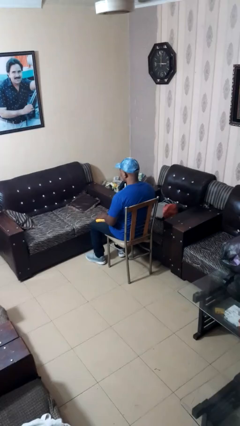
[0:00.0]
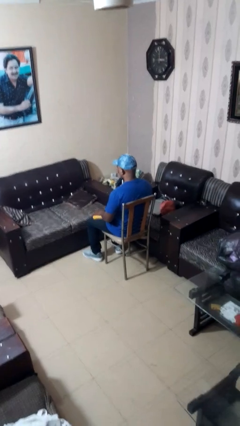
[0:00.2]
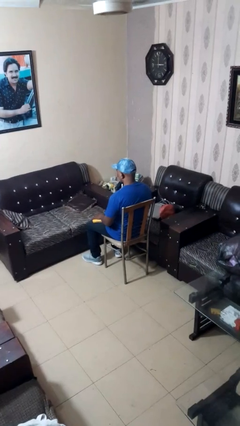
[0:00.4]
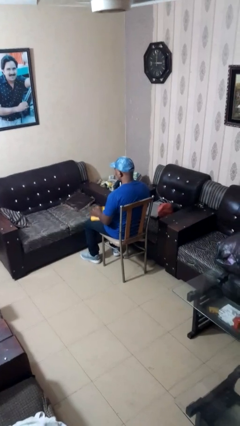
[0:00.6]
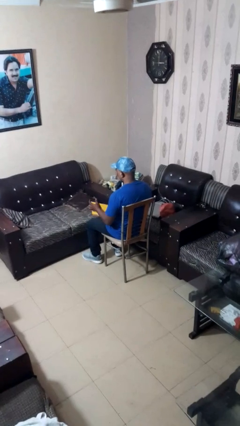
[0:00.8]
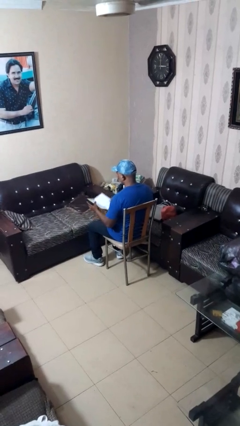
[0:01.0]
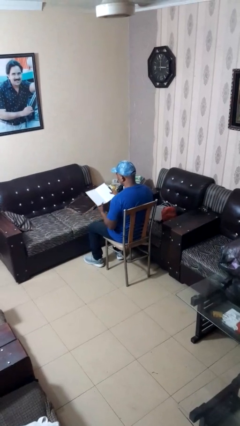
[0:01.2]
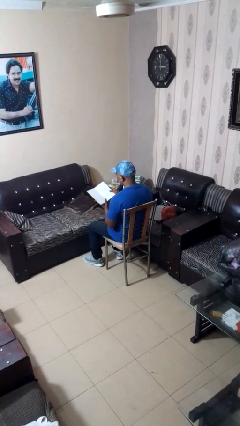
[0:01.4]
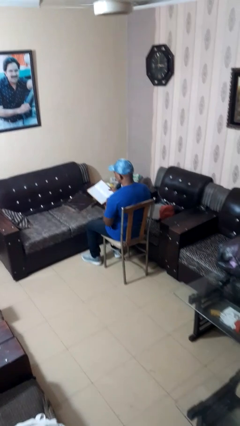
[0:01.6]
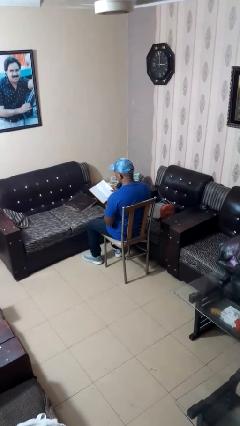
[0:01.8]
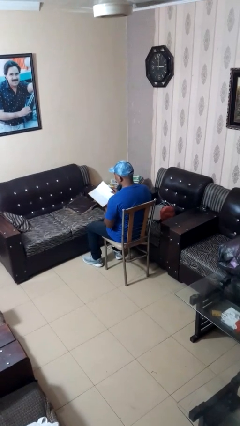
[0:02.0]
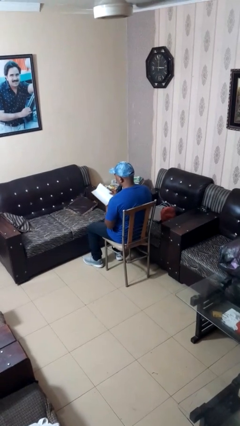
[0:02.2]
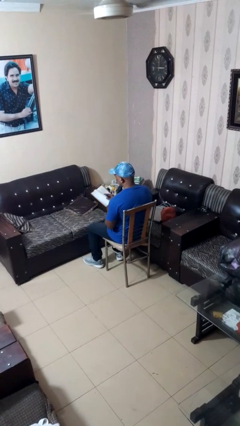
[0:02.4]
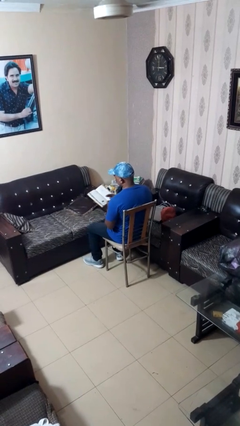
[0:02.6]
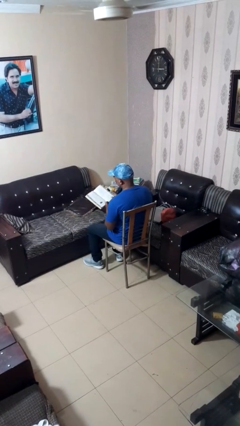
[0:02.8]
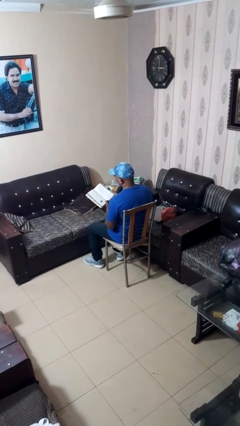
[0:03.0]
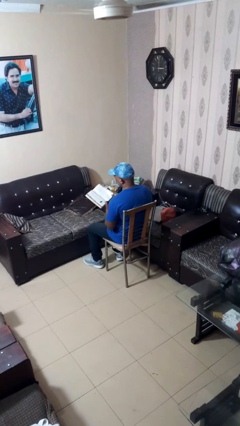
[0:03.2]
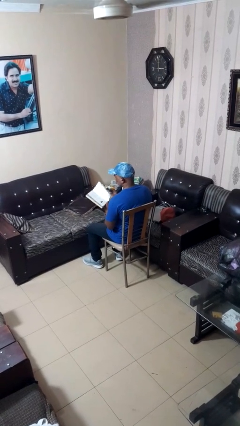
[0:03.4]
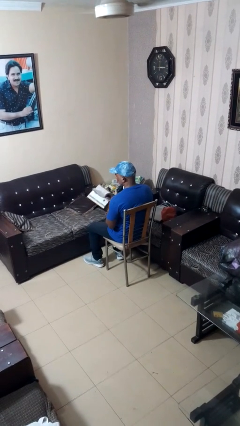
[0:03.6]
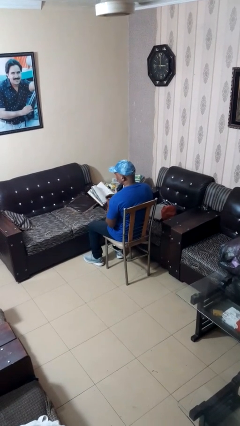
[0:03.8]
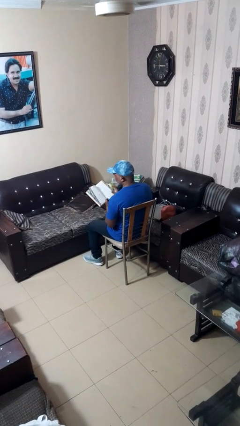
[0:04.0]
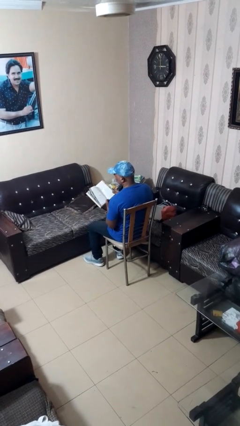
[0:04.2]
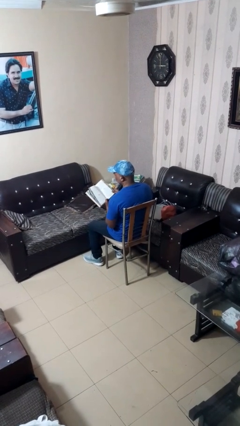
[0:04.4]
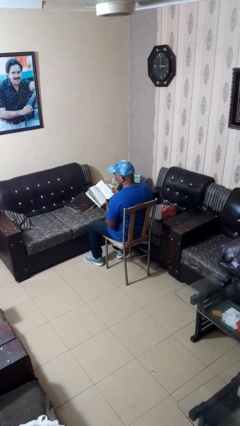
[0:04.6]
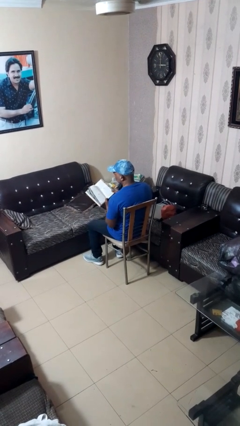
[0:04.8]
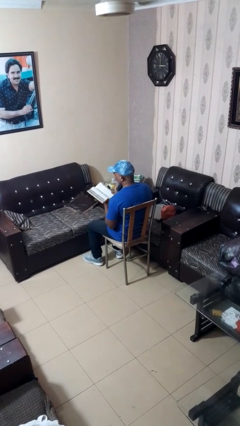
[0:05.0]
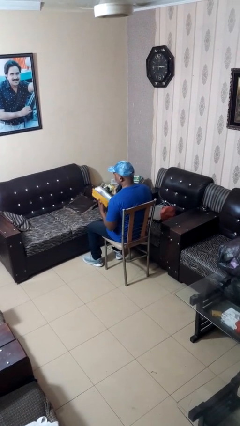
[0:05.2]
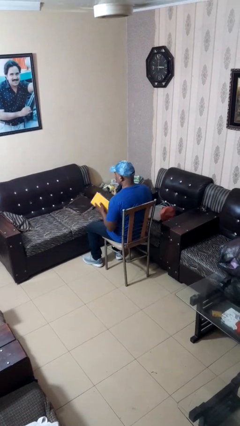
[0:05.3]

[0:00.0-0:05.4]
person reads book

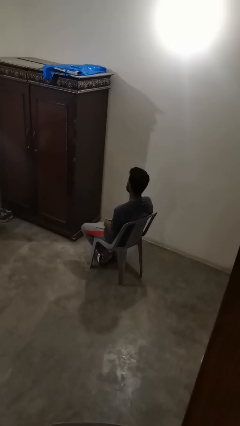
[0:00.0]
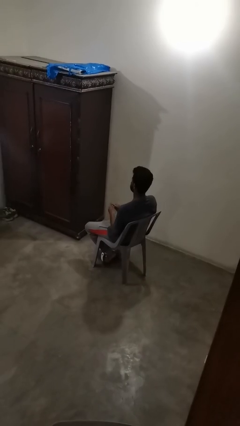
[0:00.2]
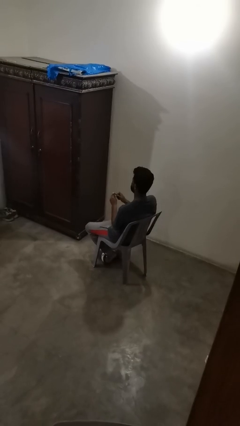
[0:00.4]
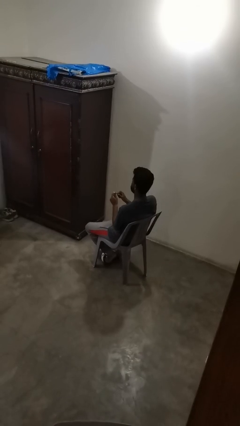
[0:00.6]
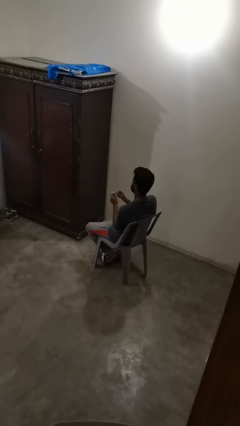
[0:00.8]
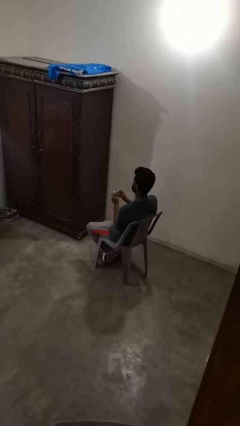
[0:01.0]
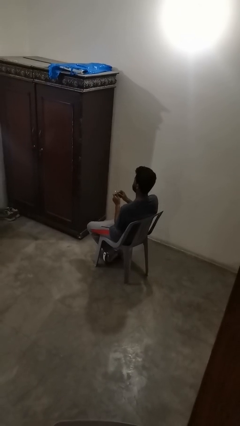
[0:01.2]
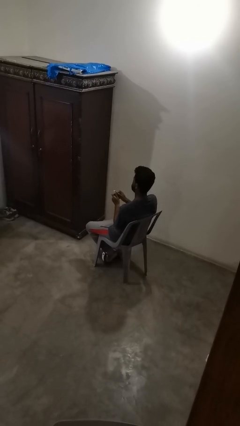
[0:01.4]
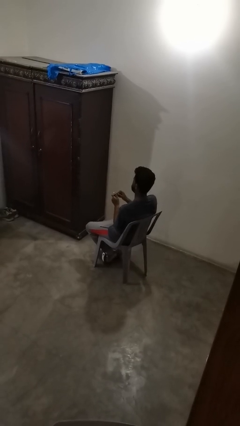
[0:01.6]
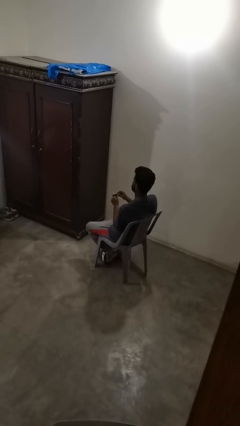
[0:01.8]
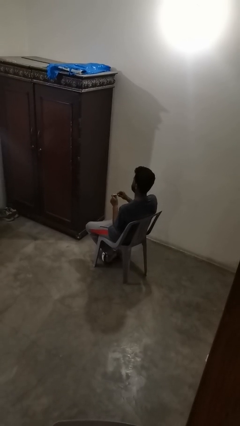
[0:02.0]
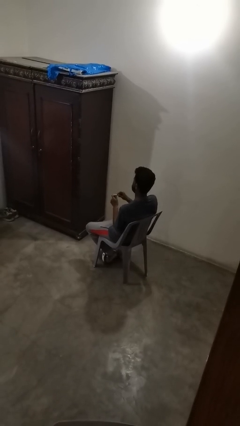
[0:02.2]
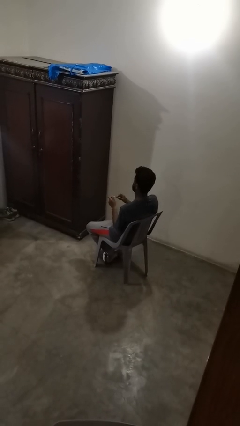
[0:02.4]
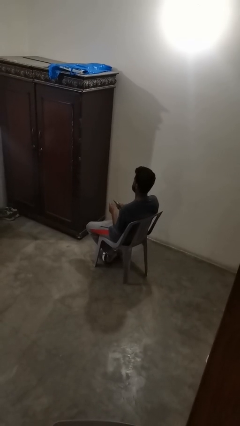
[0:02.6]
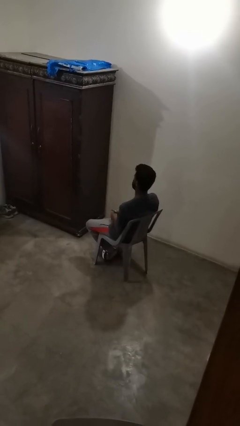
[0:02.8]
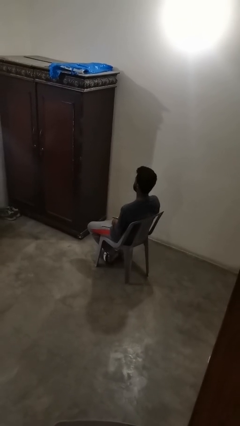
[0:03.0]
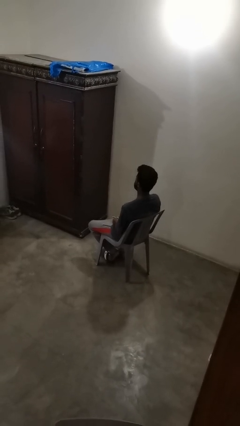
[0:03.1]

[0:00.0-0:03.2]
person files fingernails

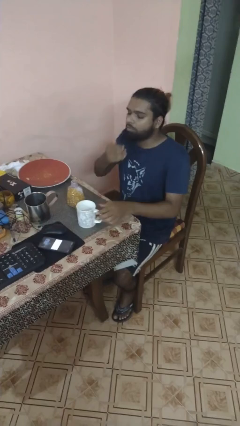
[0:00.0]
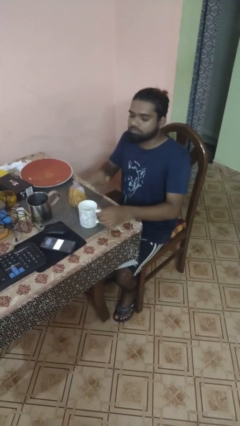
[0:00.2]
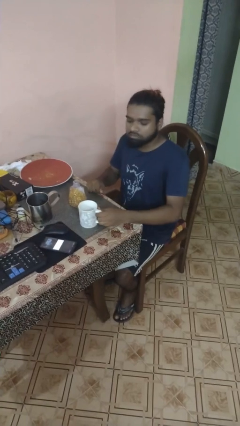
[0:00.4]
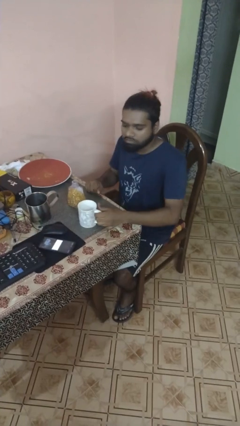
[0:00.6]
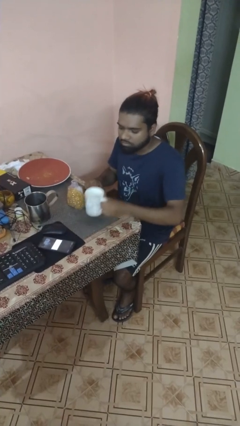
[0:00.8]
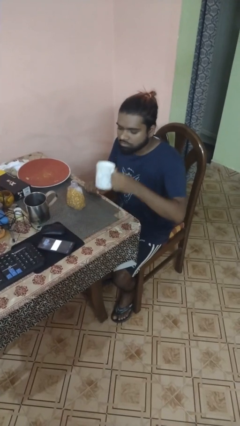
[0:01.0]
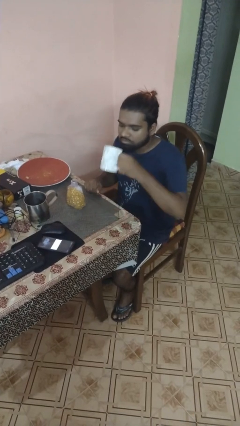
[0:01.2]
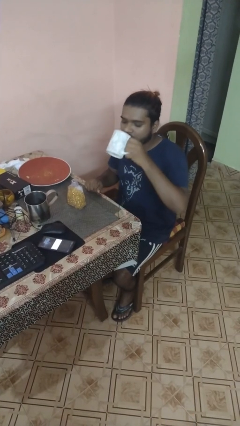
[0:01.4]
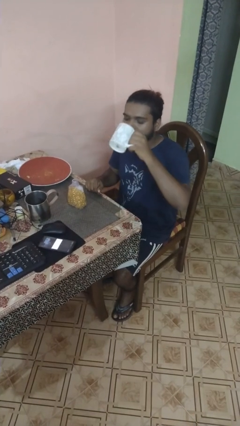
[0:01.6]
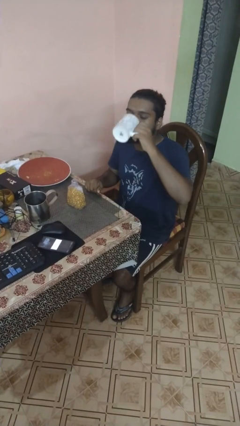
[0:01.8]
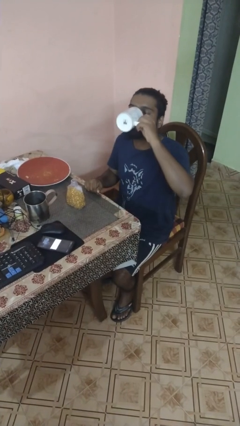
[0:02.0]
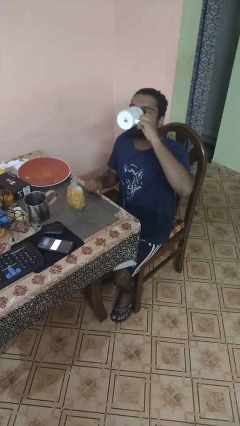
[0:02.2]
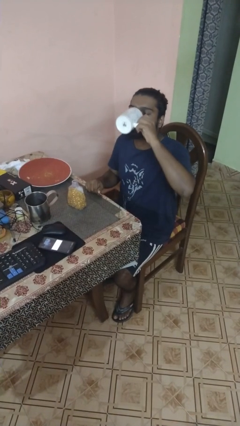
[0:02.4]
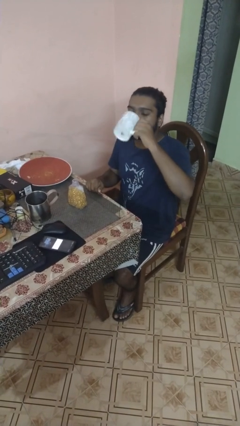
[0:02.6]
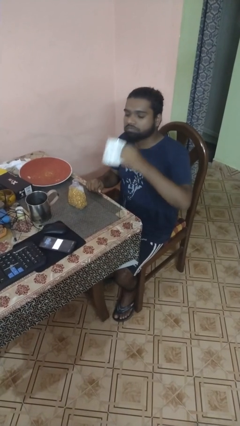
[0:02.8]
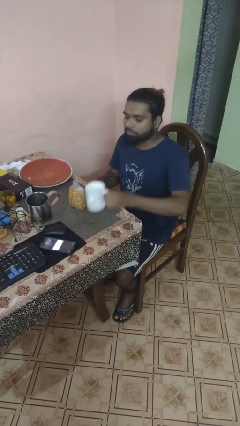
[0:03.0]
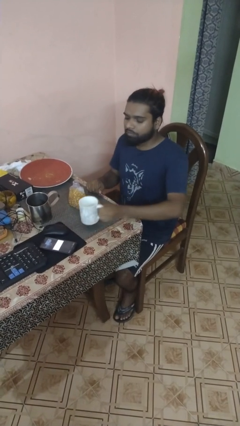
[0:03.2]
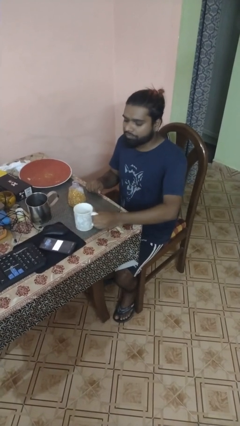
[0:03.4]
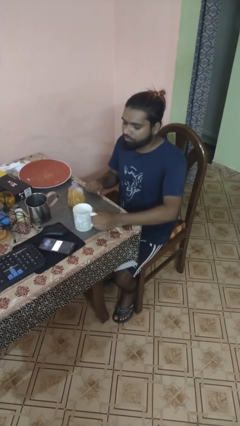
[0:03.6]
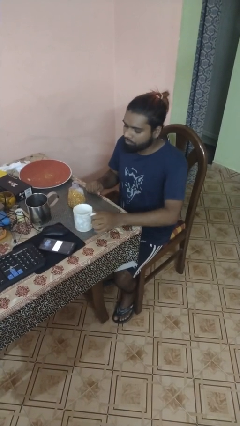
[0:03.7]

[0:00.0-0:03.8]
person drinks from cup

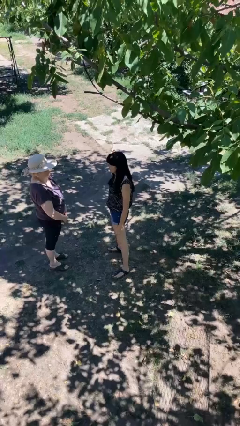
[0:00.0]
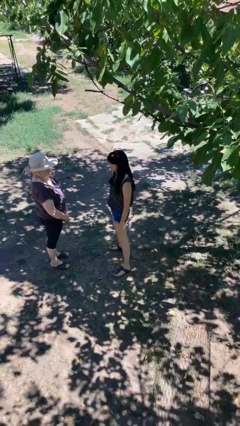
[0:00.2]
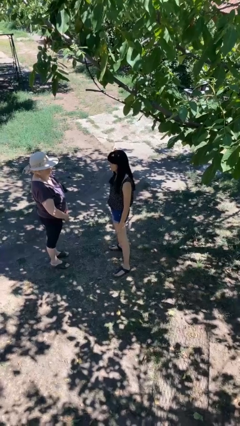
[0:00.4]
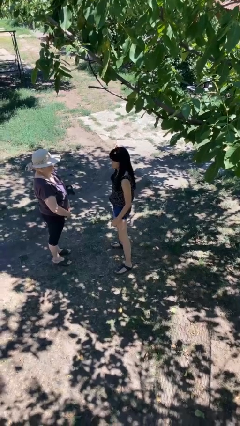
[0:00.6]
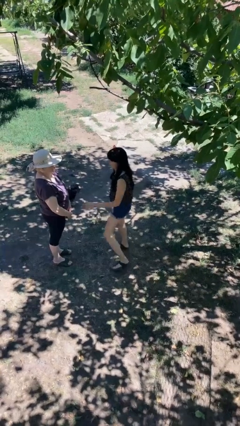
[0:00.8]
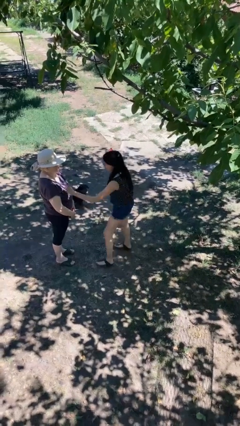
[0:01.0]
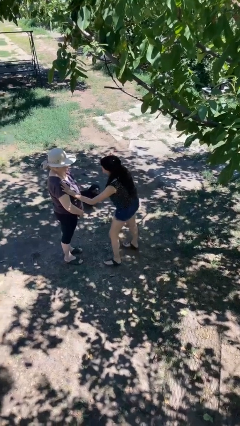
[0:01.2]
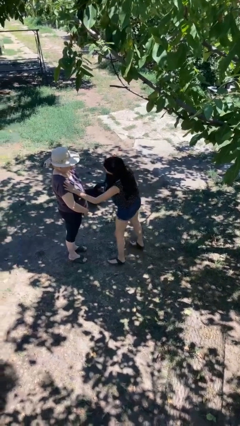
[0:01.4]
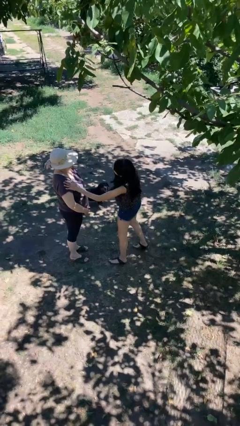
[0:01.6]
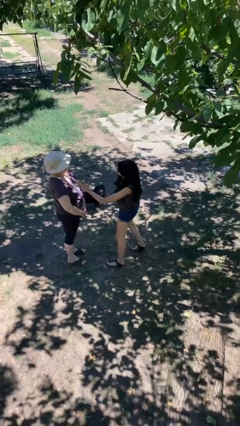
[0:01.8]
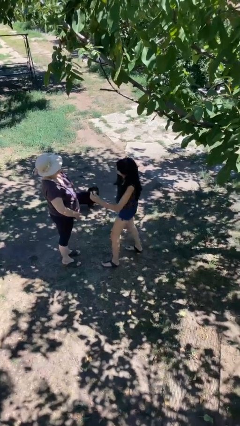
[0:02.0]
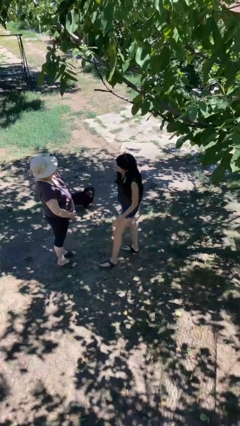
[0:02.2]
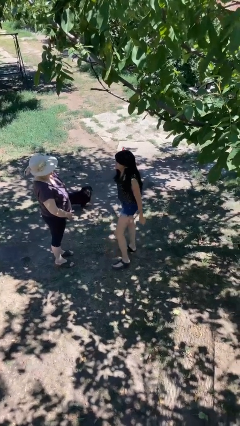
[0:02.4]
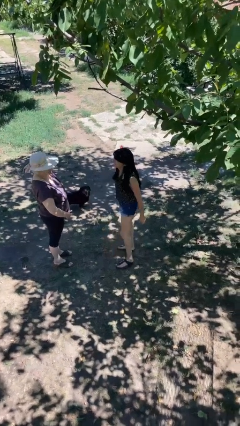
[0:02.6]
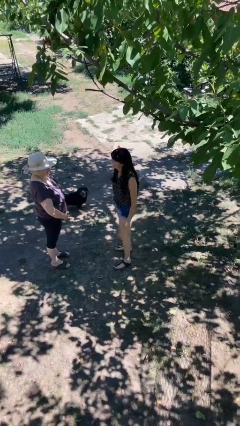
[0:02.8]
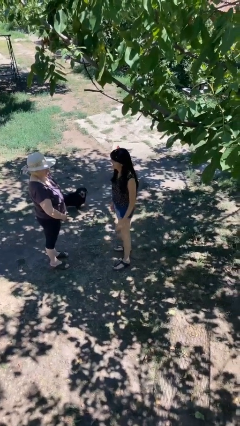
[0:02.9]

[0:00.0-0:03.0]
person shoves person

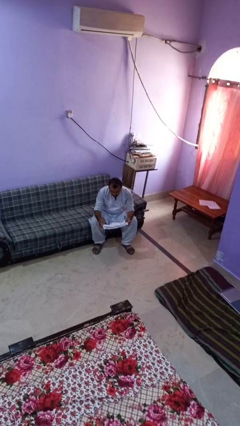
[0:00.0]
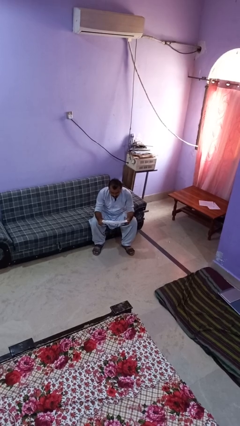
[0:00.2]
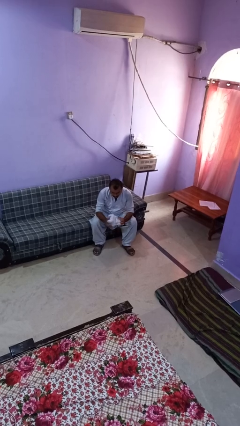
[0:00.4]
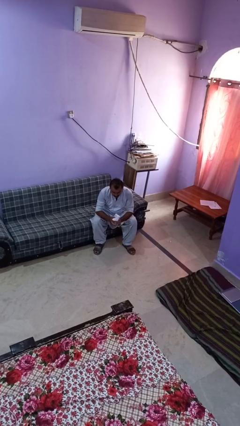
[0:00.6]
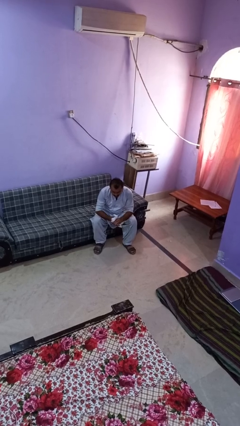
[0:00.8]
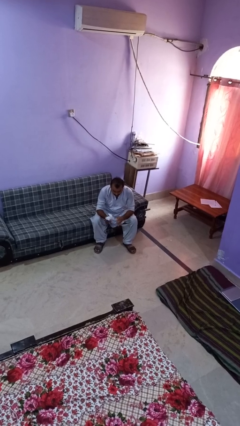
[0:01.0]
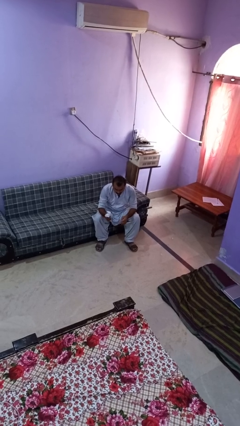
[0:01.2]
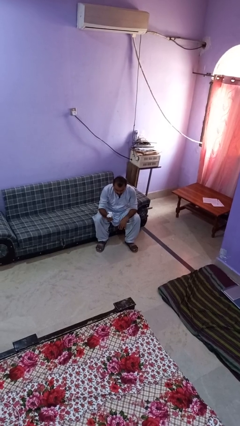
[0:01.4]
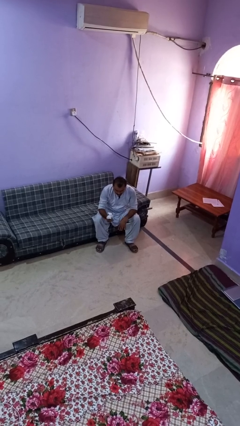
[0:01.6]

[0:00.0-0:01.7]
person crumples paper

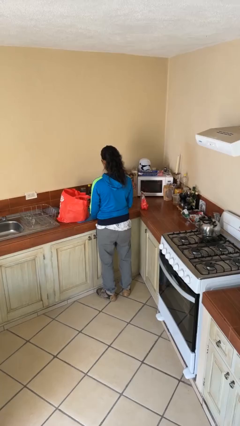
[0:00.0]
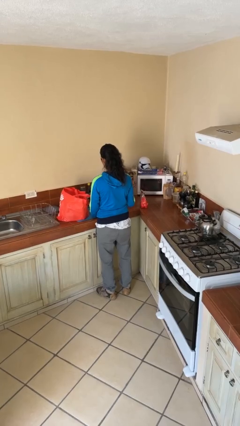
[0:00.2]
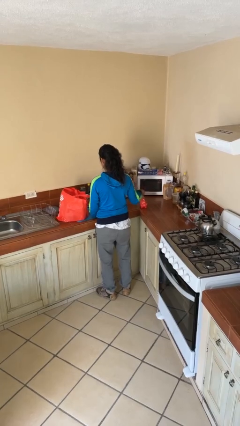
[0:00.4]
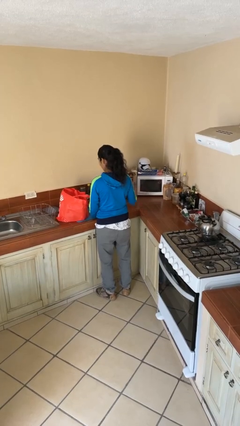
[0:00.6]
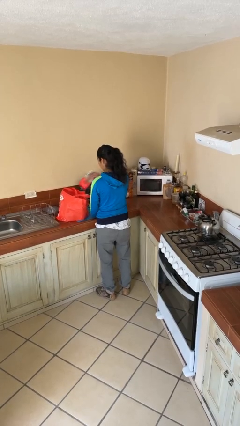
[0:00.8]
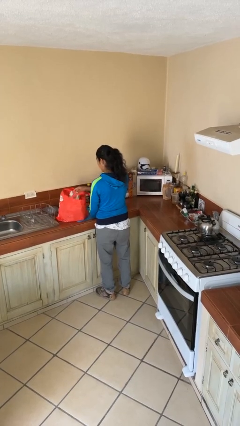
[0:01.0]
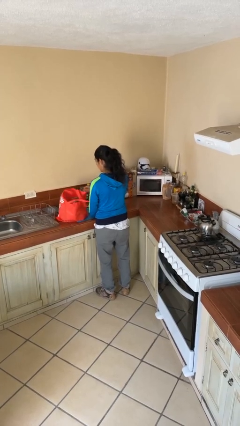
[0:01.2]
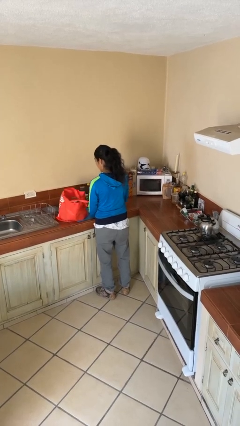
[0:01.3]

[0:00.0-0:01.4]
person puts object into bag
